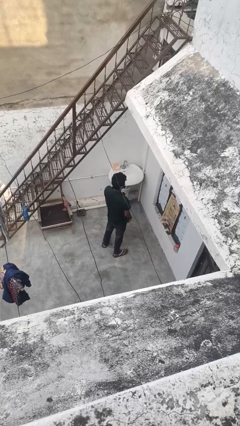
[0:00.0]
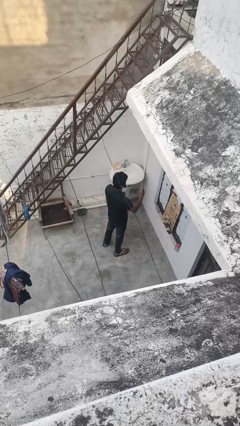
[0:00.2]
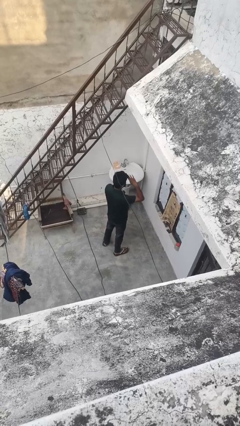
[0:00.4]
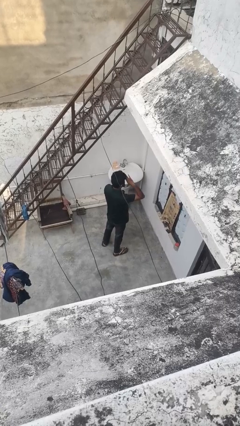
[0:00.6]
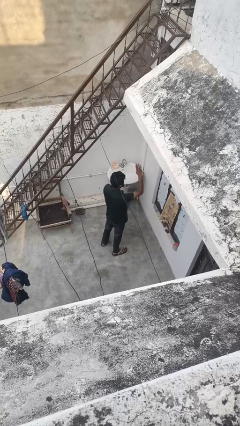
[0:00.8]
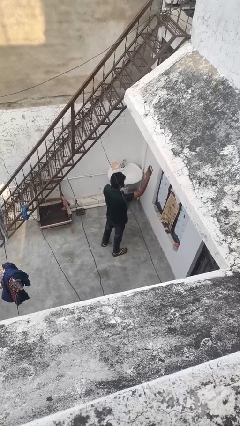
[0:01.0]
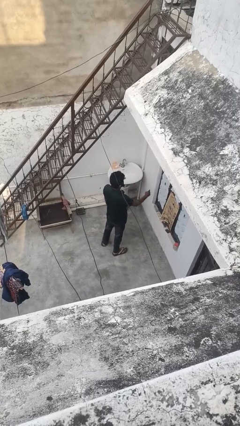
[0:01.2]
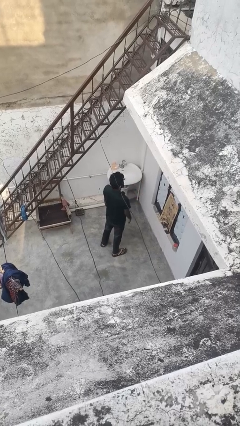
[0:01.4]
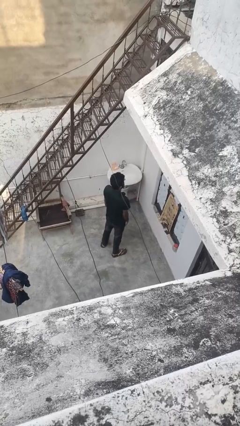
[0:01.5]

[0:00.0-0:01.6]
person salutes

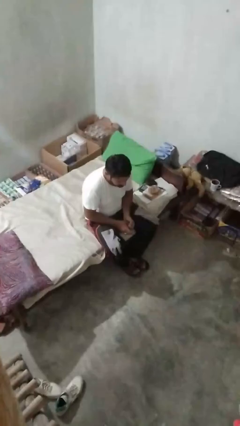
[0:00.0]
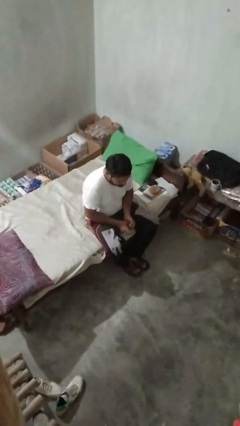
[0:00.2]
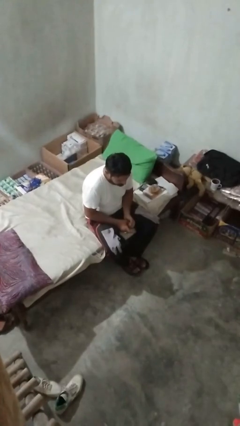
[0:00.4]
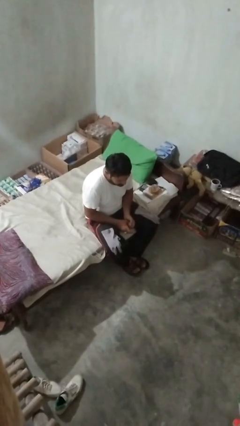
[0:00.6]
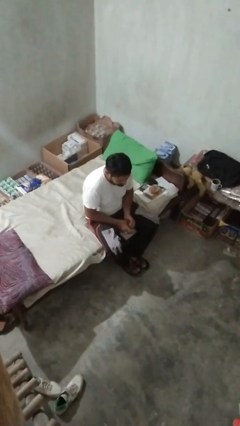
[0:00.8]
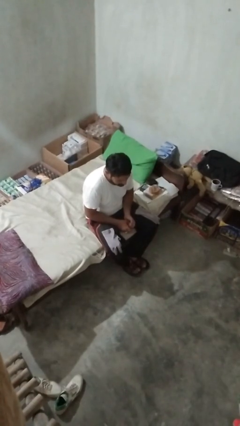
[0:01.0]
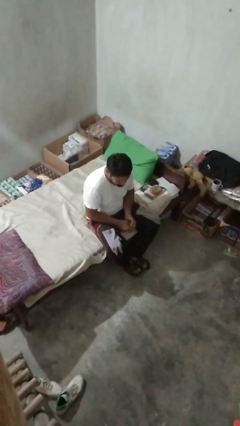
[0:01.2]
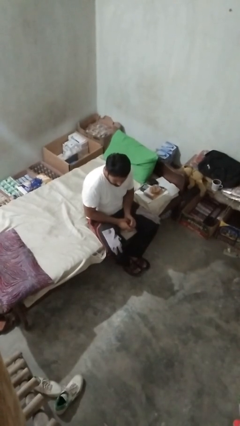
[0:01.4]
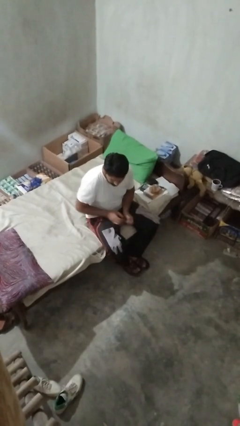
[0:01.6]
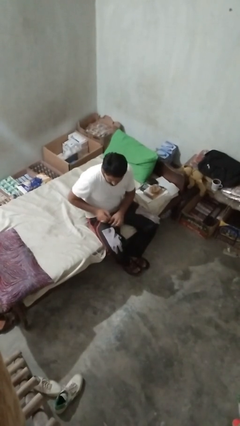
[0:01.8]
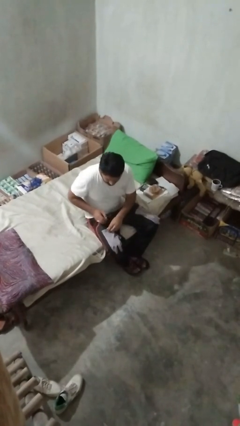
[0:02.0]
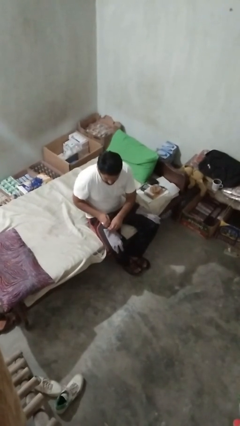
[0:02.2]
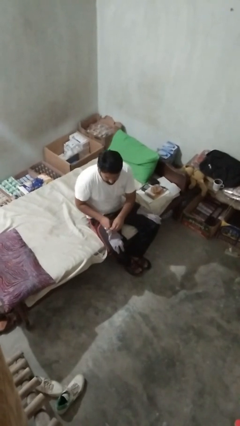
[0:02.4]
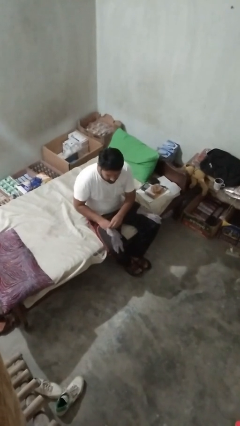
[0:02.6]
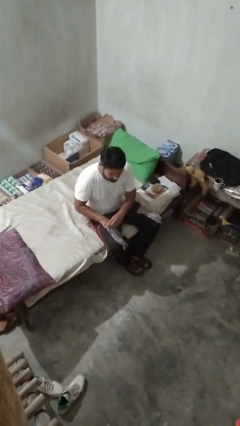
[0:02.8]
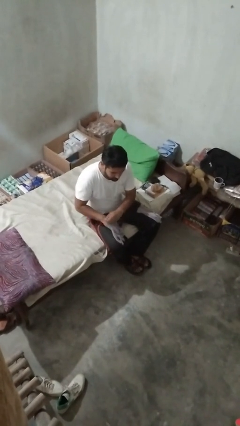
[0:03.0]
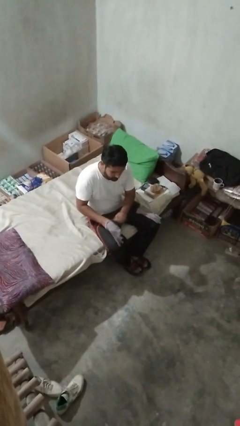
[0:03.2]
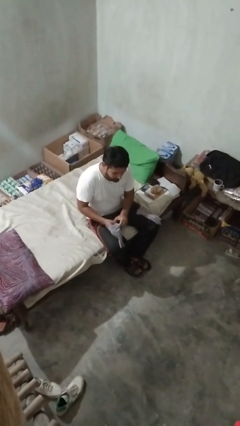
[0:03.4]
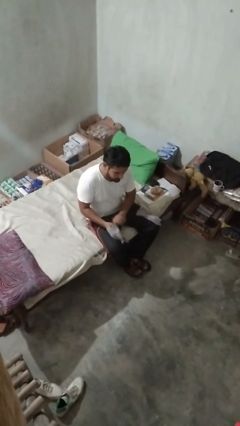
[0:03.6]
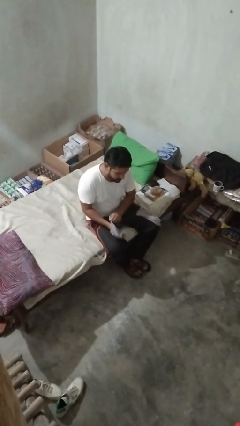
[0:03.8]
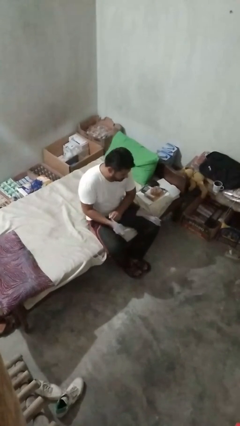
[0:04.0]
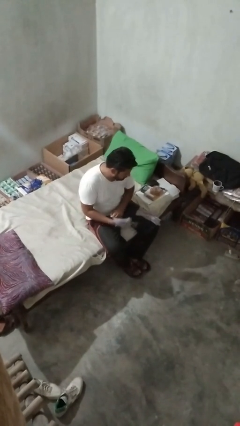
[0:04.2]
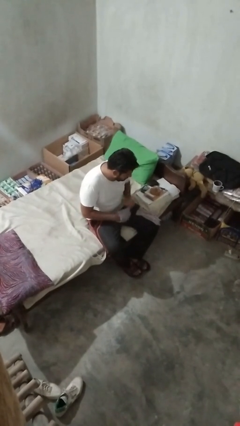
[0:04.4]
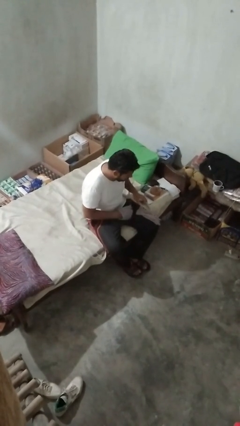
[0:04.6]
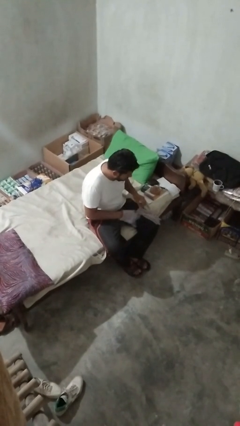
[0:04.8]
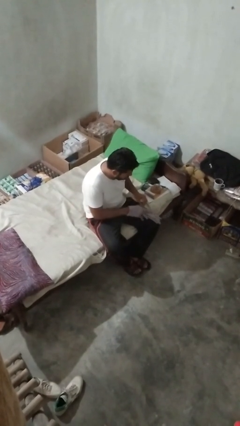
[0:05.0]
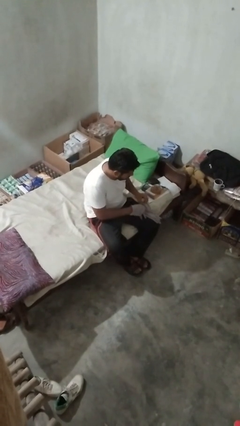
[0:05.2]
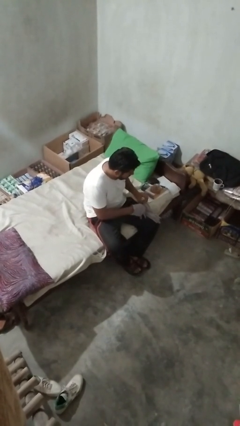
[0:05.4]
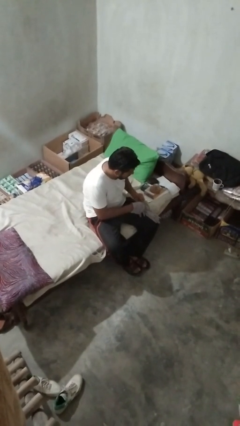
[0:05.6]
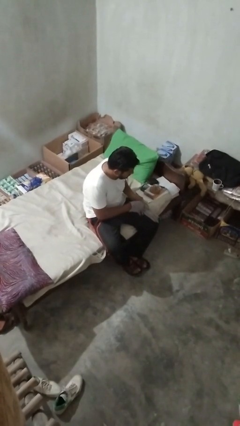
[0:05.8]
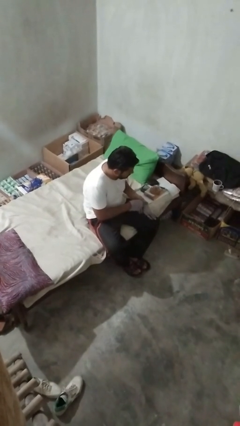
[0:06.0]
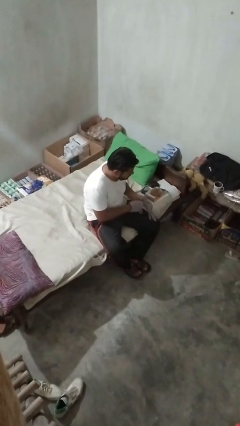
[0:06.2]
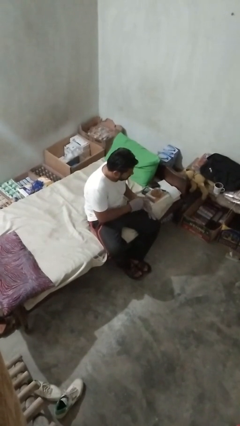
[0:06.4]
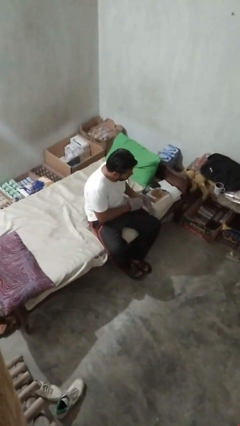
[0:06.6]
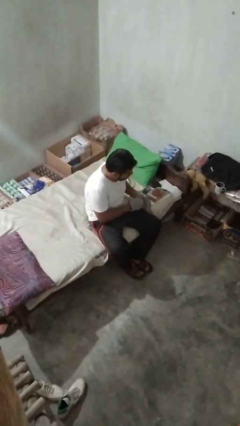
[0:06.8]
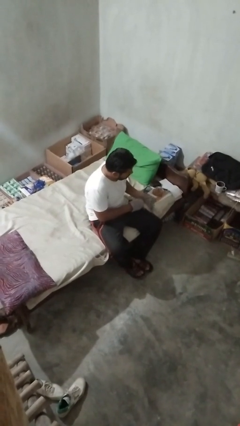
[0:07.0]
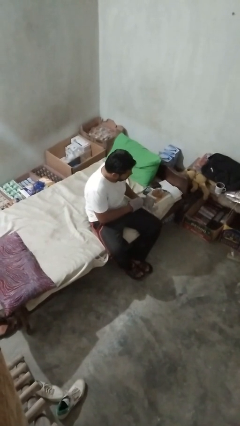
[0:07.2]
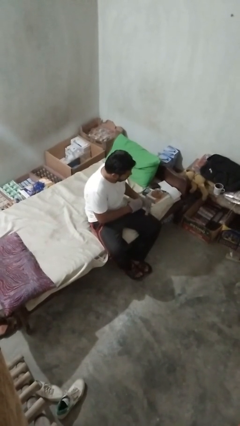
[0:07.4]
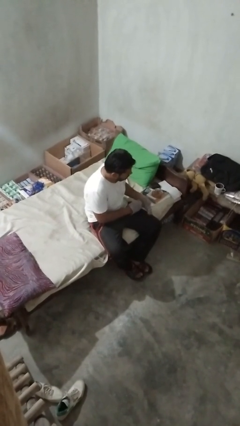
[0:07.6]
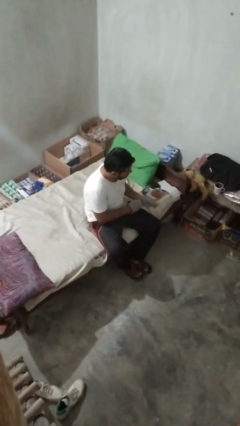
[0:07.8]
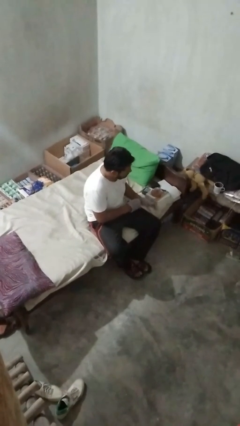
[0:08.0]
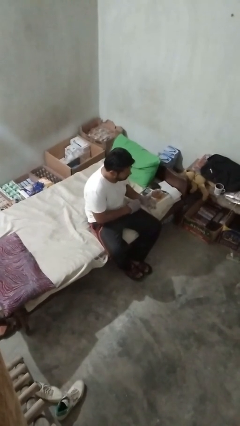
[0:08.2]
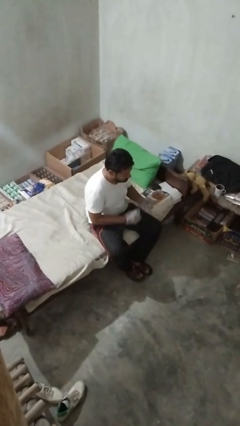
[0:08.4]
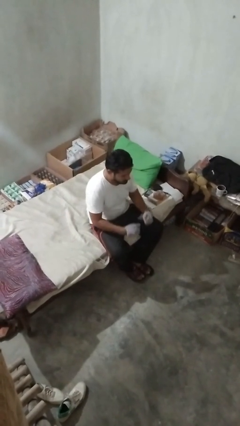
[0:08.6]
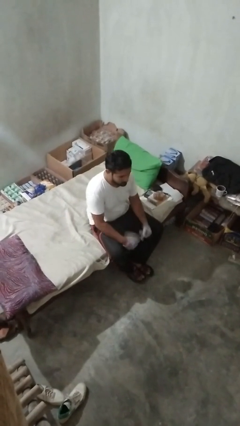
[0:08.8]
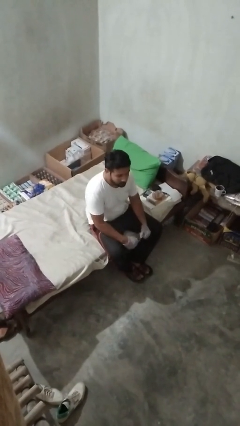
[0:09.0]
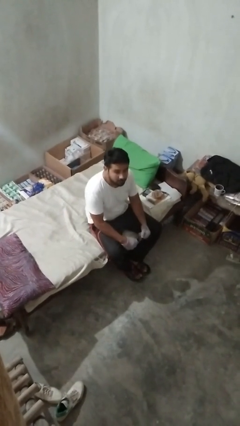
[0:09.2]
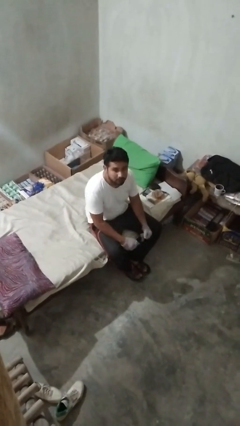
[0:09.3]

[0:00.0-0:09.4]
person puts on gloves

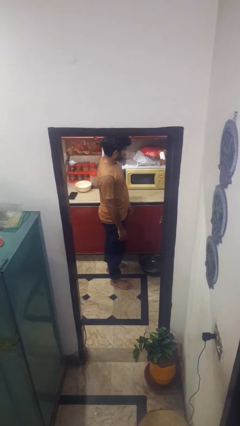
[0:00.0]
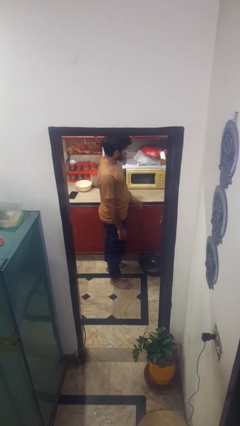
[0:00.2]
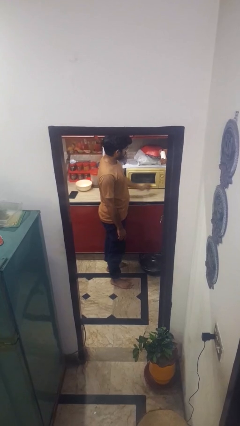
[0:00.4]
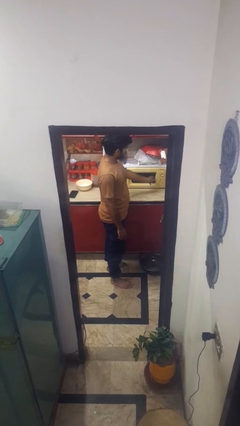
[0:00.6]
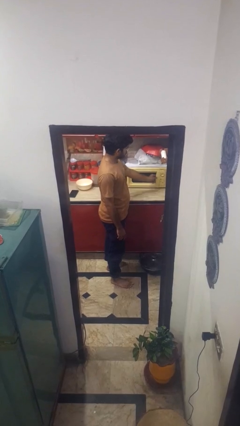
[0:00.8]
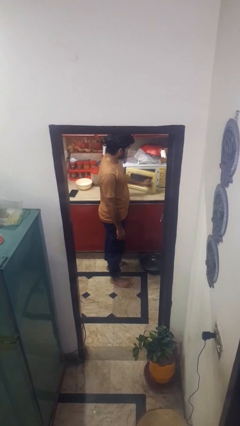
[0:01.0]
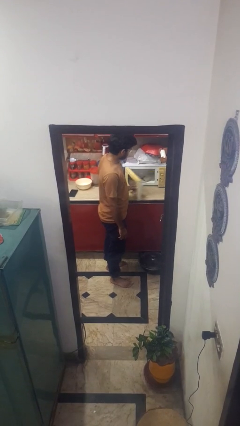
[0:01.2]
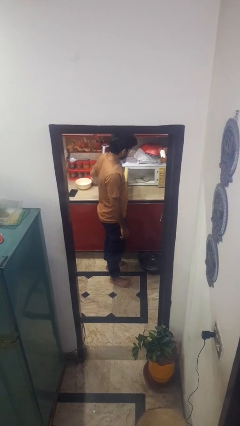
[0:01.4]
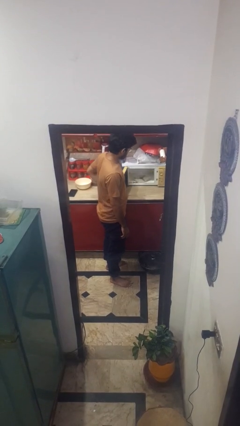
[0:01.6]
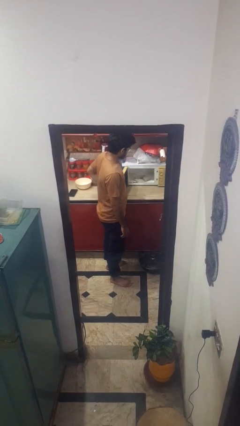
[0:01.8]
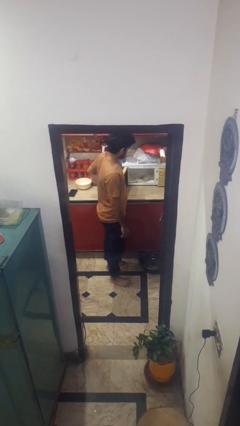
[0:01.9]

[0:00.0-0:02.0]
person opens microwave

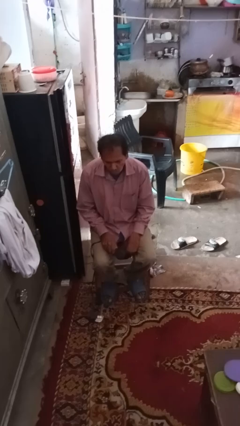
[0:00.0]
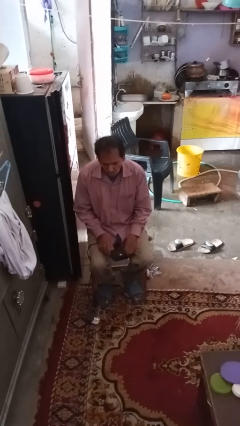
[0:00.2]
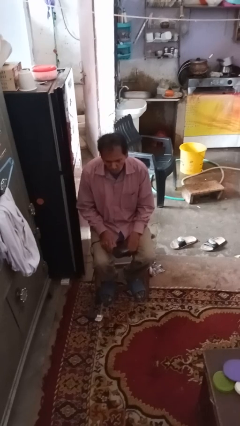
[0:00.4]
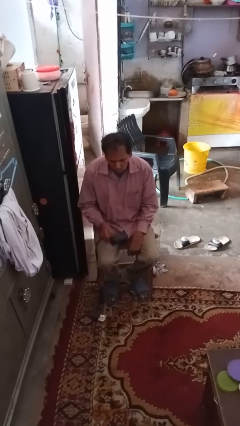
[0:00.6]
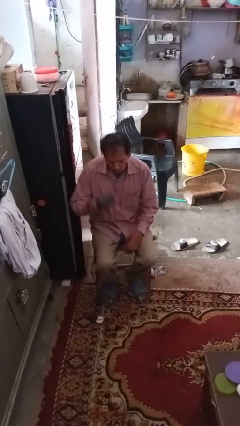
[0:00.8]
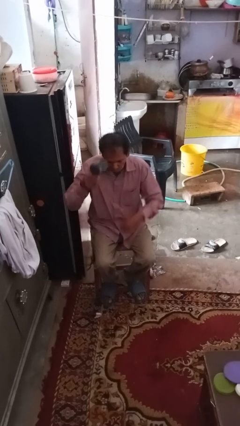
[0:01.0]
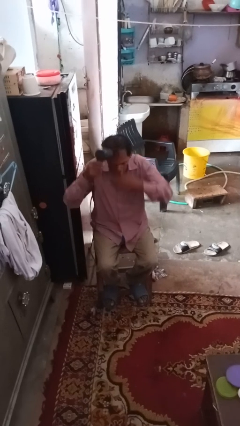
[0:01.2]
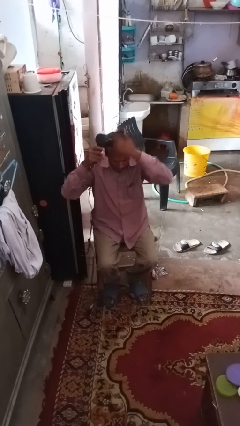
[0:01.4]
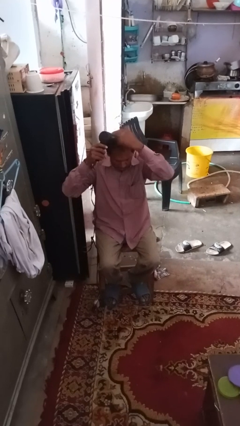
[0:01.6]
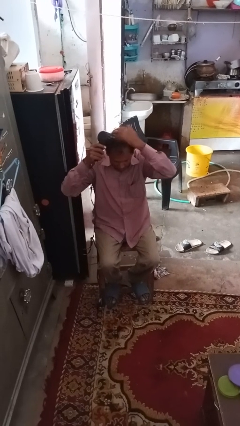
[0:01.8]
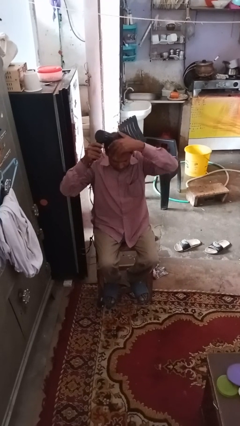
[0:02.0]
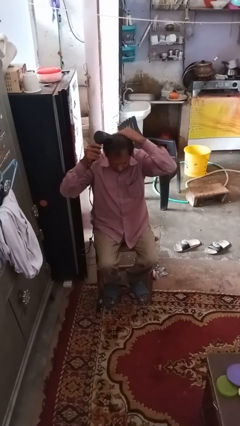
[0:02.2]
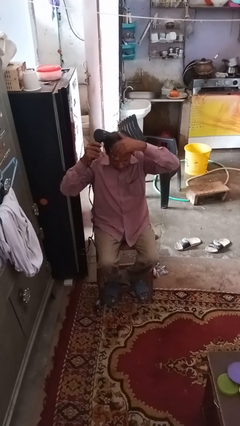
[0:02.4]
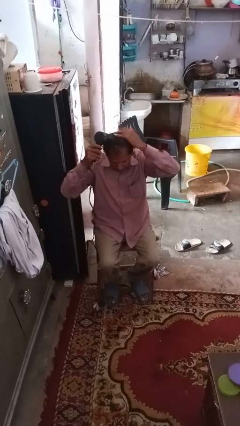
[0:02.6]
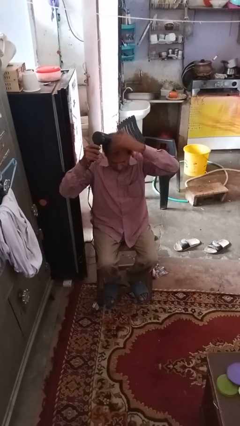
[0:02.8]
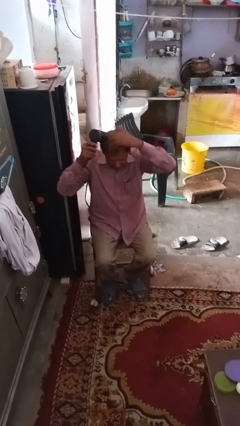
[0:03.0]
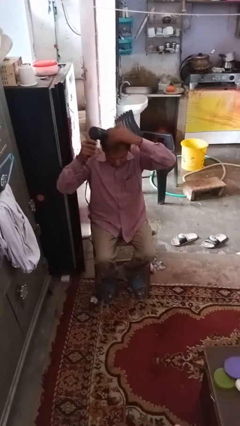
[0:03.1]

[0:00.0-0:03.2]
person dries hair with hairdryer

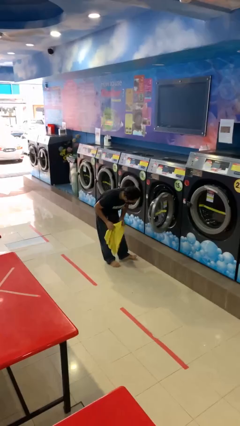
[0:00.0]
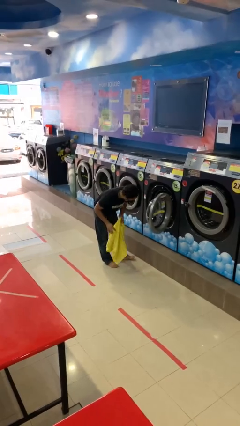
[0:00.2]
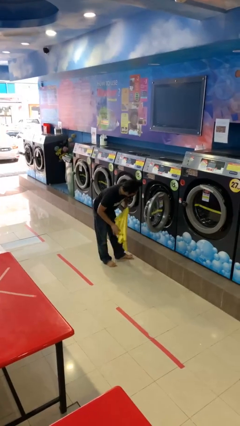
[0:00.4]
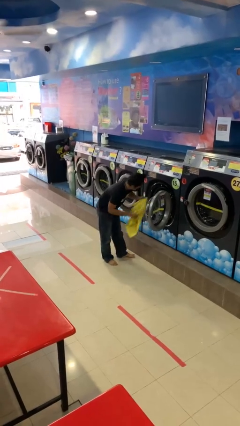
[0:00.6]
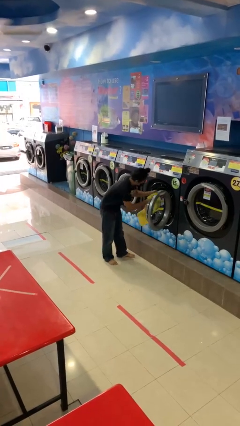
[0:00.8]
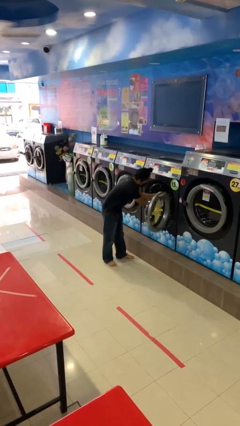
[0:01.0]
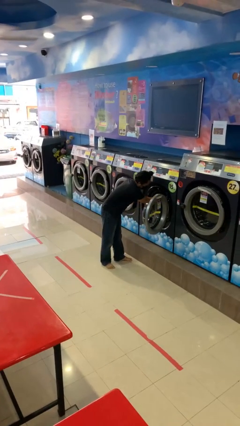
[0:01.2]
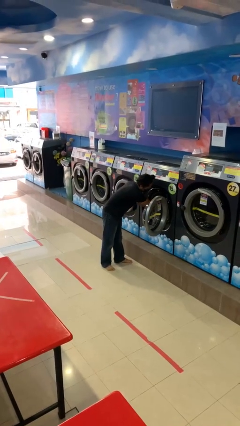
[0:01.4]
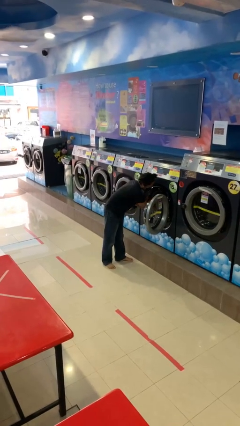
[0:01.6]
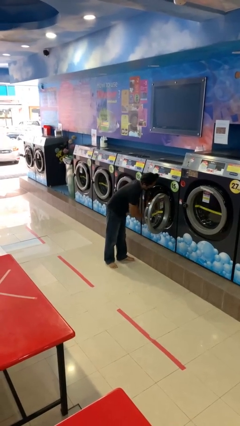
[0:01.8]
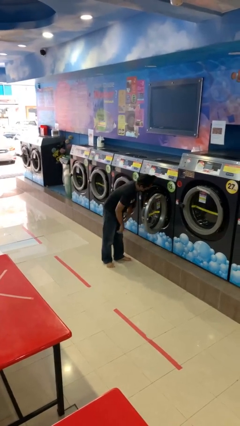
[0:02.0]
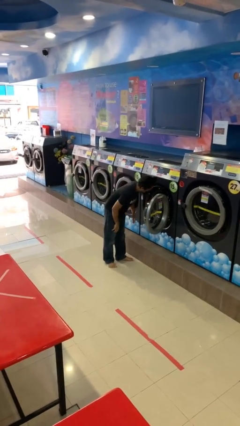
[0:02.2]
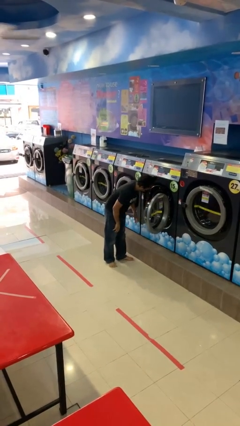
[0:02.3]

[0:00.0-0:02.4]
person loads clotheswasher
